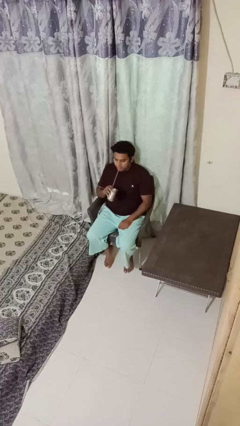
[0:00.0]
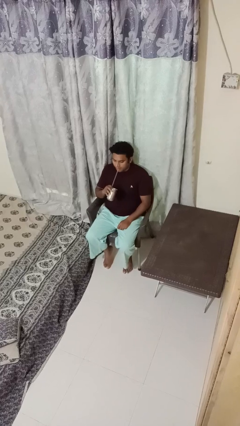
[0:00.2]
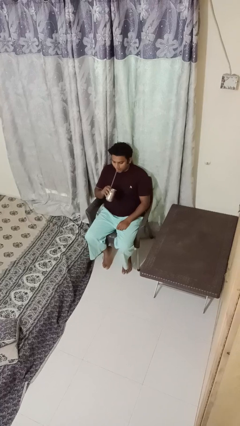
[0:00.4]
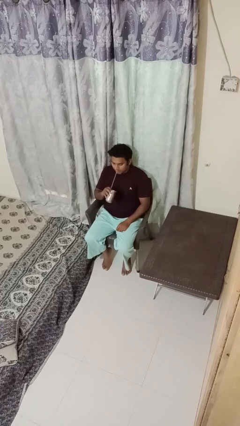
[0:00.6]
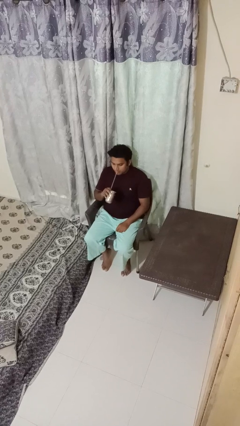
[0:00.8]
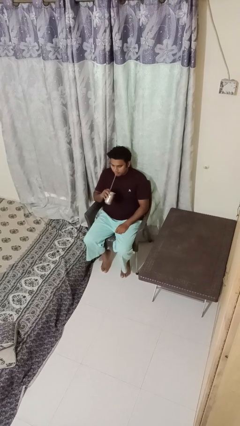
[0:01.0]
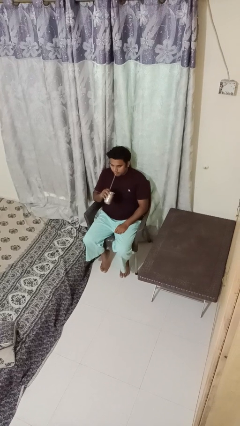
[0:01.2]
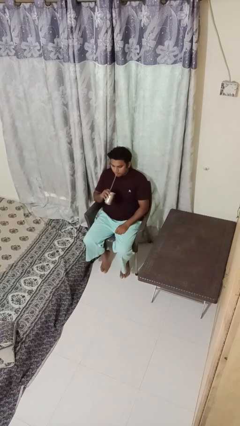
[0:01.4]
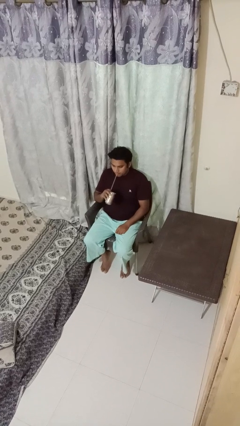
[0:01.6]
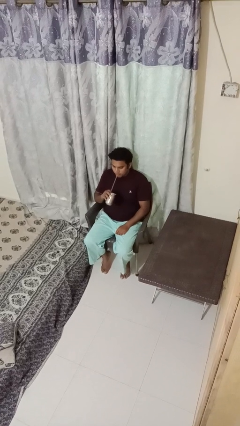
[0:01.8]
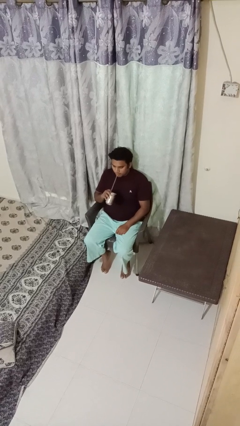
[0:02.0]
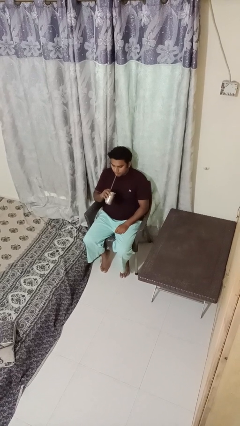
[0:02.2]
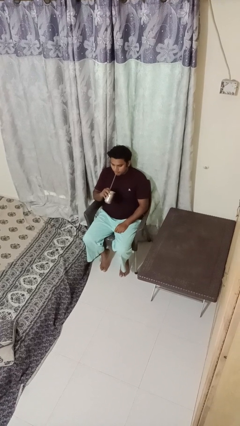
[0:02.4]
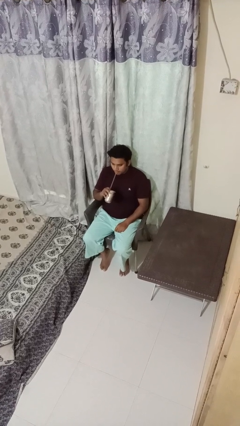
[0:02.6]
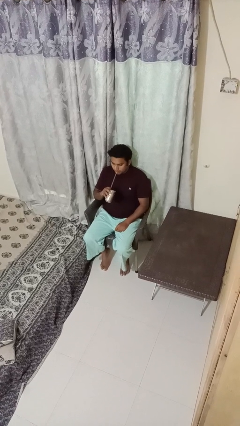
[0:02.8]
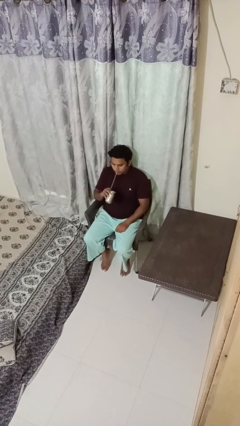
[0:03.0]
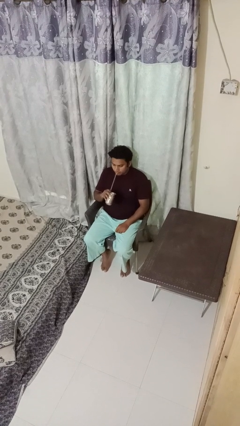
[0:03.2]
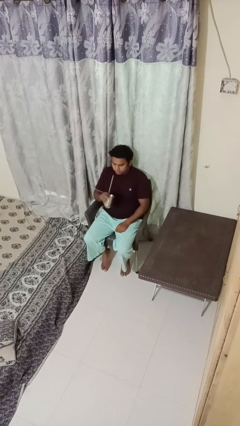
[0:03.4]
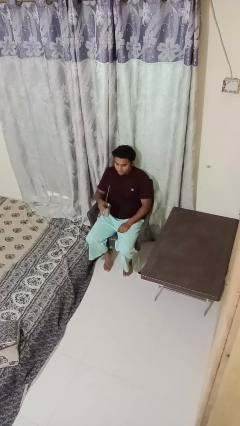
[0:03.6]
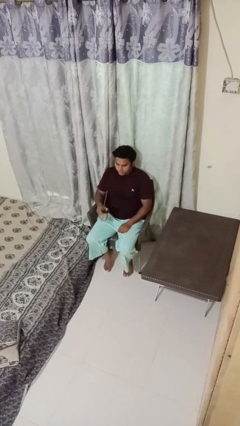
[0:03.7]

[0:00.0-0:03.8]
person drinks from straw

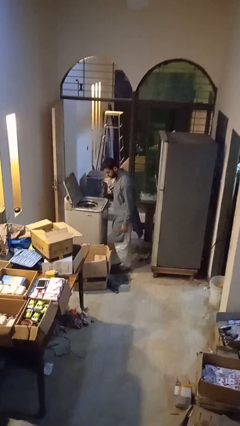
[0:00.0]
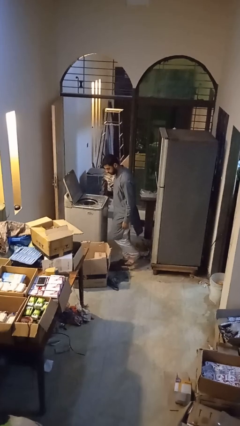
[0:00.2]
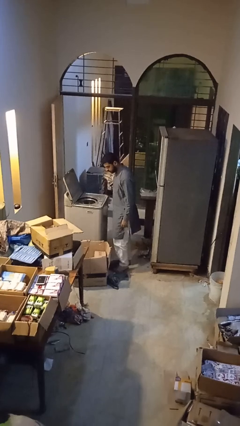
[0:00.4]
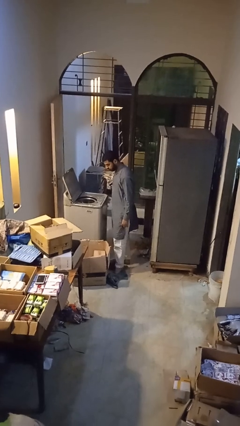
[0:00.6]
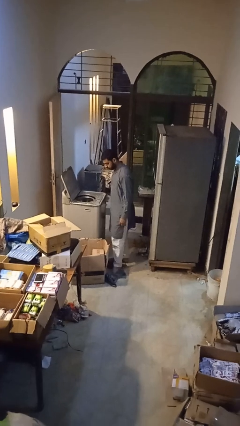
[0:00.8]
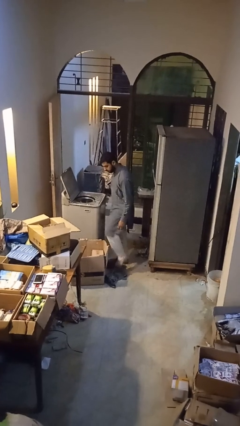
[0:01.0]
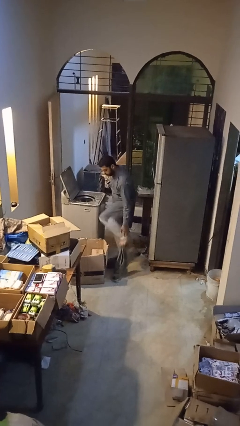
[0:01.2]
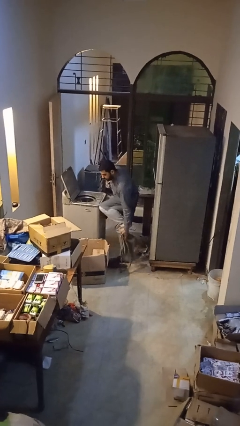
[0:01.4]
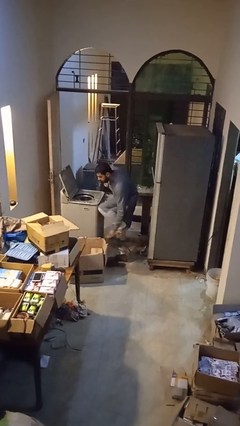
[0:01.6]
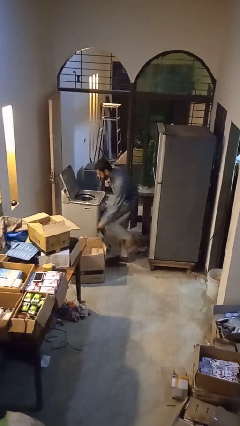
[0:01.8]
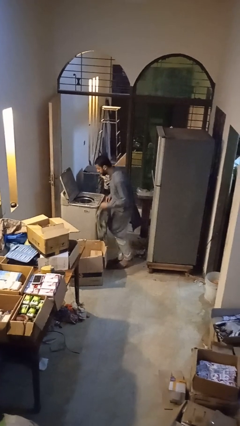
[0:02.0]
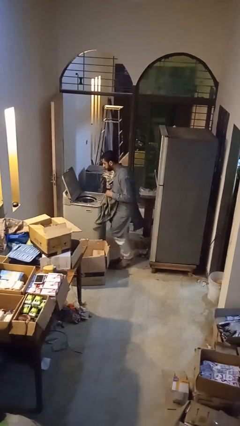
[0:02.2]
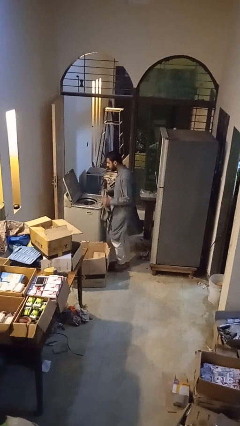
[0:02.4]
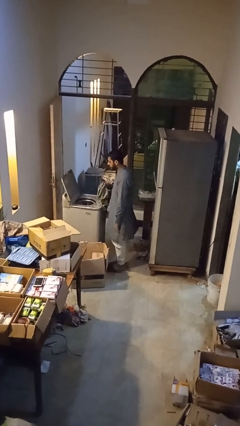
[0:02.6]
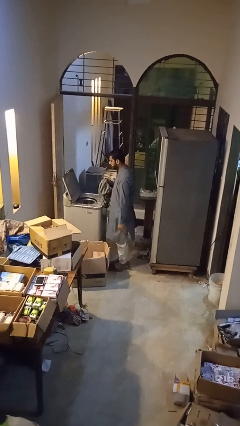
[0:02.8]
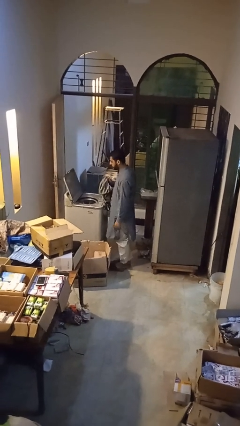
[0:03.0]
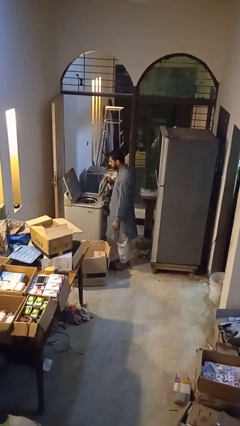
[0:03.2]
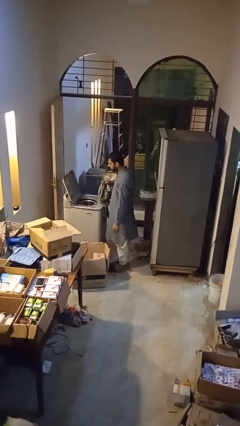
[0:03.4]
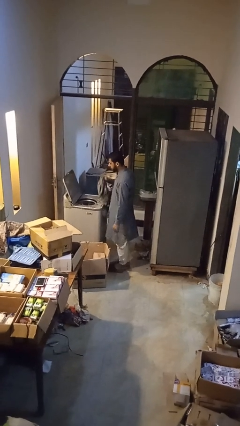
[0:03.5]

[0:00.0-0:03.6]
person unloads clotheswasher

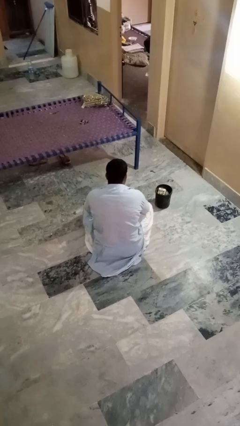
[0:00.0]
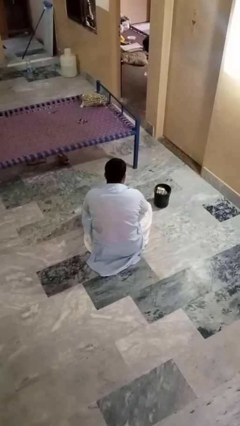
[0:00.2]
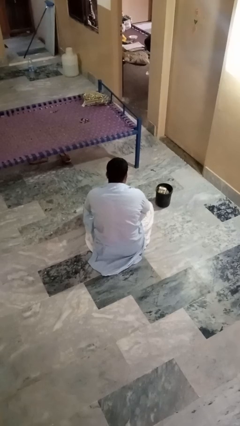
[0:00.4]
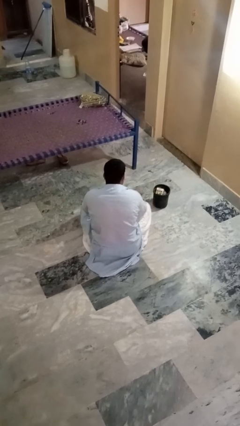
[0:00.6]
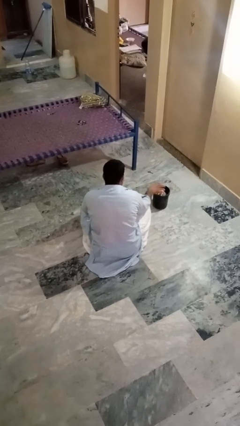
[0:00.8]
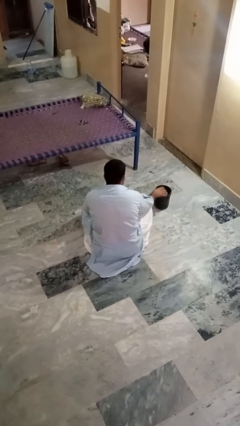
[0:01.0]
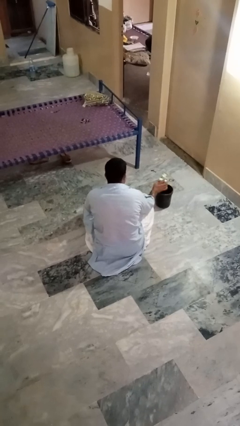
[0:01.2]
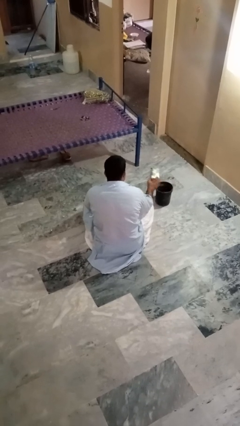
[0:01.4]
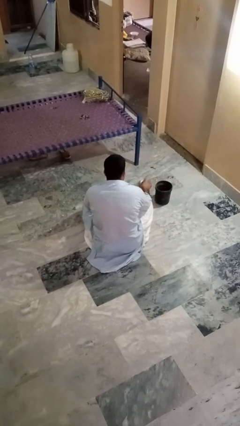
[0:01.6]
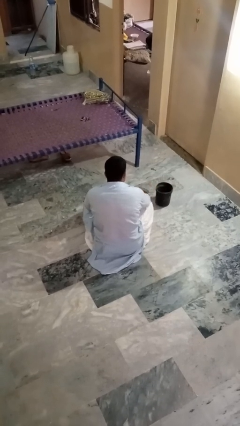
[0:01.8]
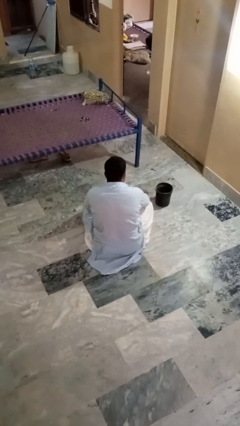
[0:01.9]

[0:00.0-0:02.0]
person takes object from basket

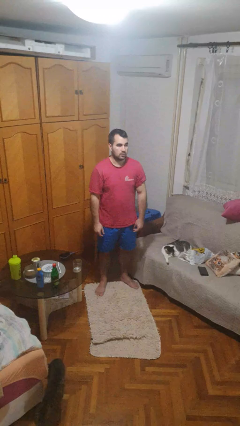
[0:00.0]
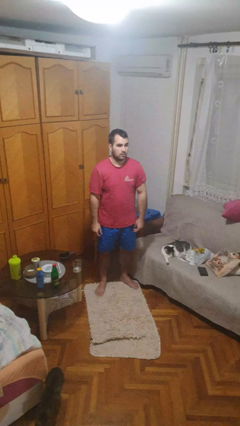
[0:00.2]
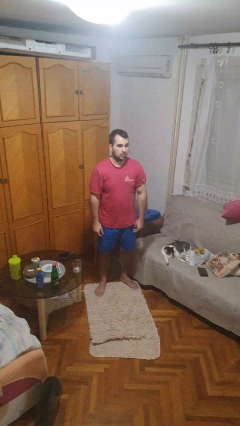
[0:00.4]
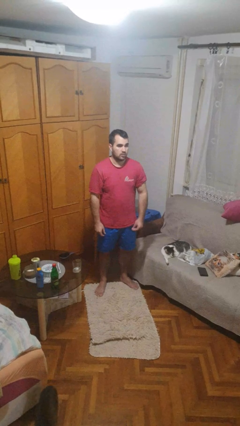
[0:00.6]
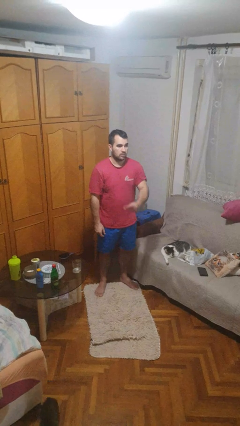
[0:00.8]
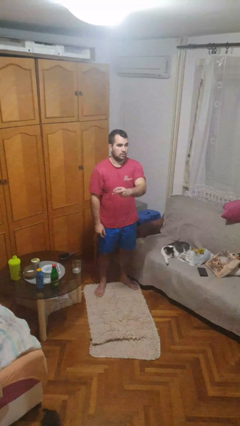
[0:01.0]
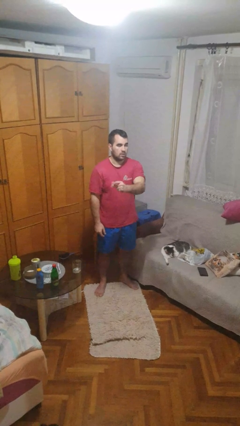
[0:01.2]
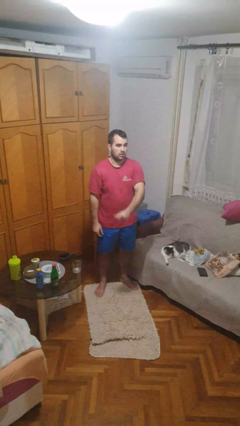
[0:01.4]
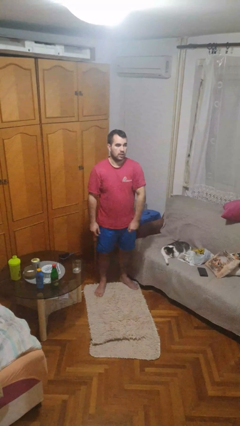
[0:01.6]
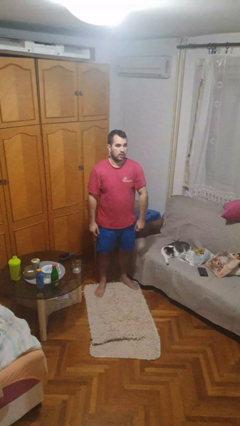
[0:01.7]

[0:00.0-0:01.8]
person snaps fingers

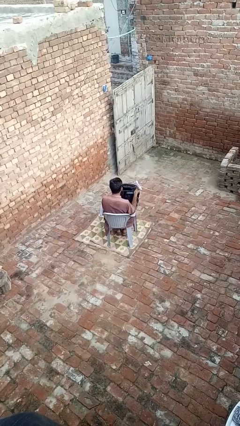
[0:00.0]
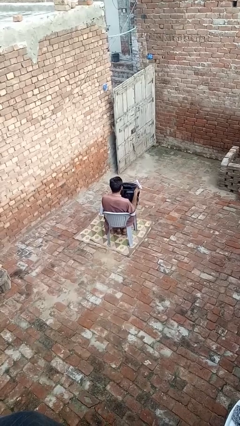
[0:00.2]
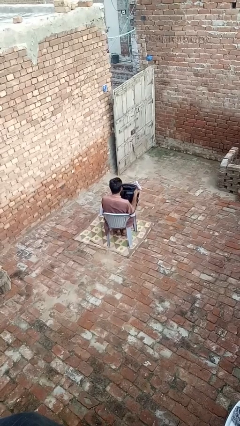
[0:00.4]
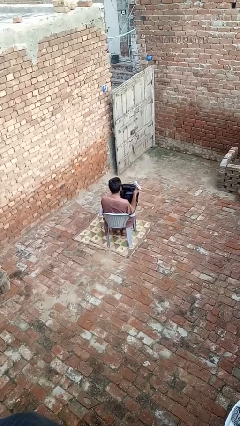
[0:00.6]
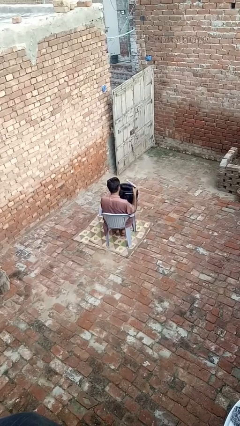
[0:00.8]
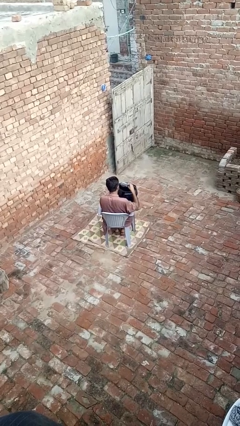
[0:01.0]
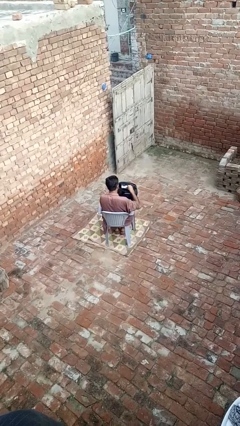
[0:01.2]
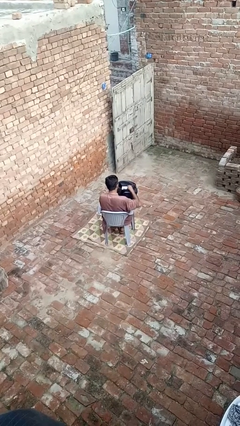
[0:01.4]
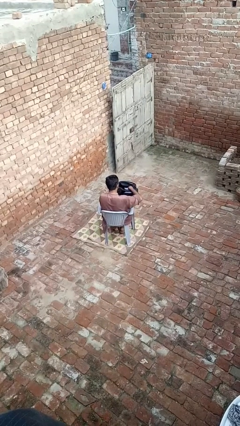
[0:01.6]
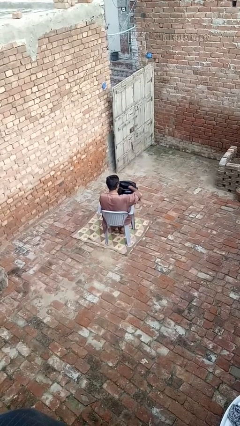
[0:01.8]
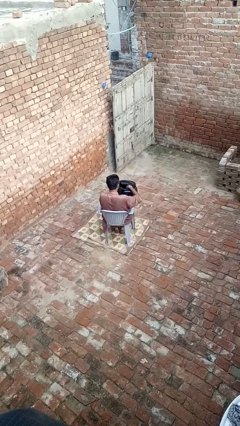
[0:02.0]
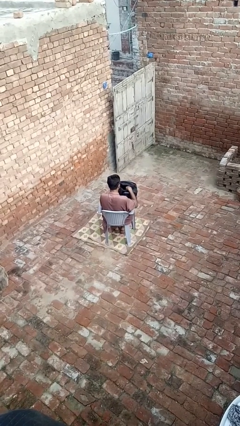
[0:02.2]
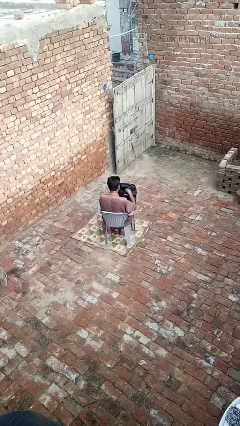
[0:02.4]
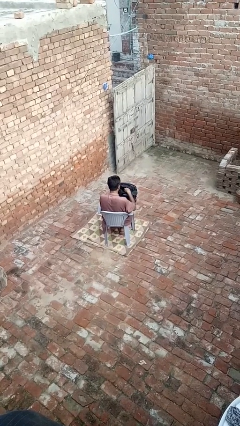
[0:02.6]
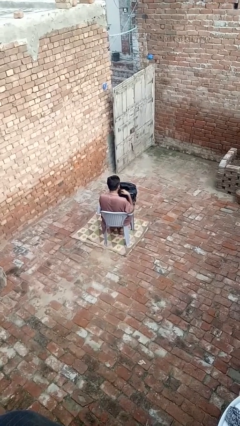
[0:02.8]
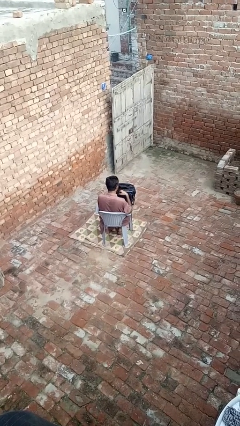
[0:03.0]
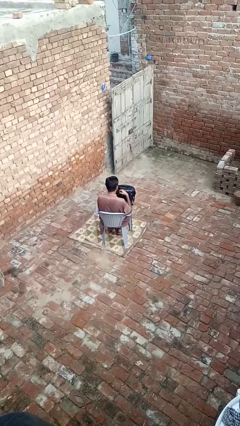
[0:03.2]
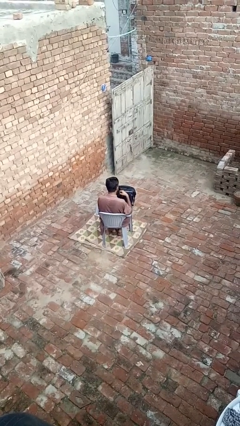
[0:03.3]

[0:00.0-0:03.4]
person puts object into backpack

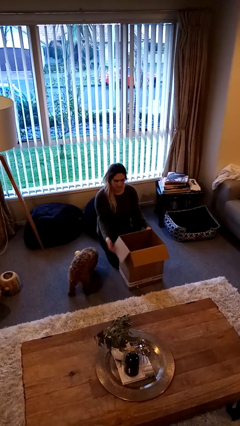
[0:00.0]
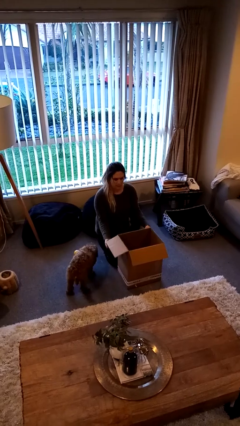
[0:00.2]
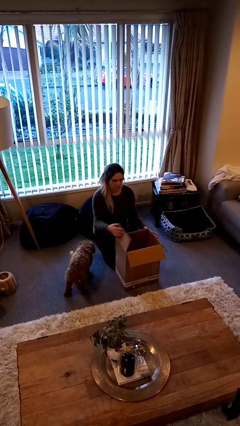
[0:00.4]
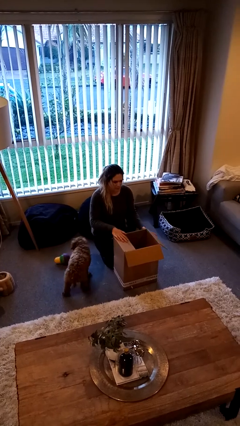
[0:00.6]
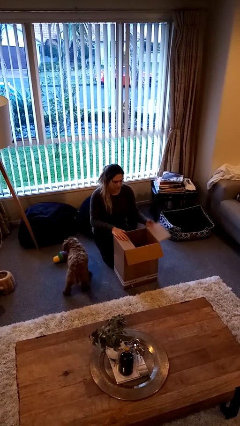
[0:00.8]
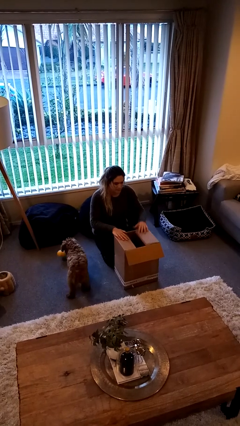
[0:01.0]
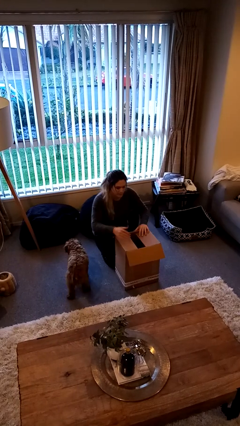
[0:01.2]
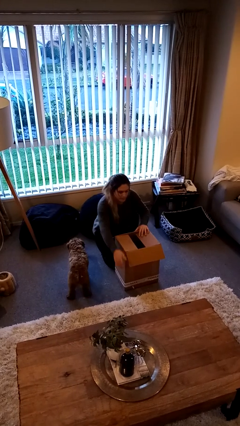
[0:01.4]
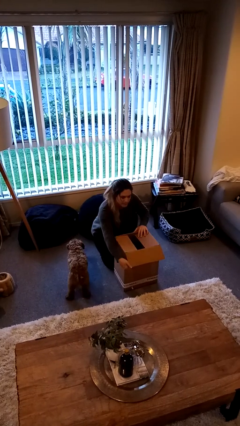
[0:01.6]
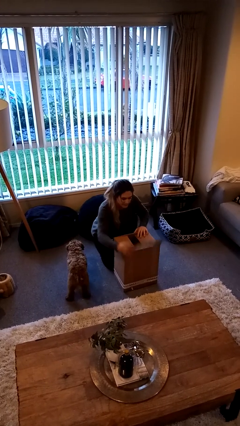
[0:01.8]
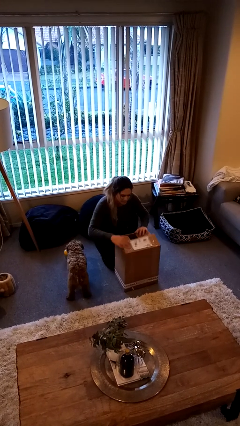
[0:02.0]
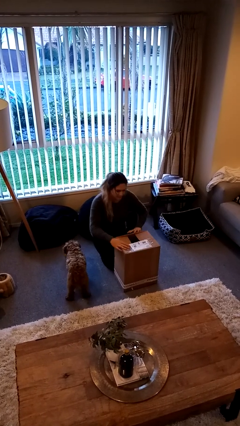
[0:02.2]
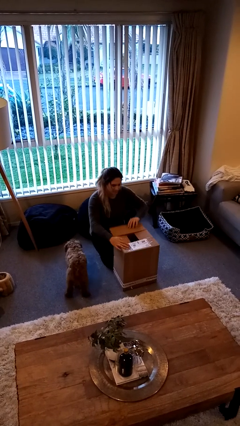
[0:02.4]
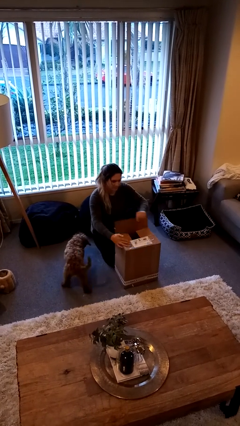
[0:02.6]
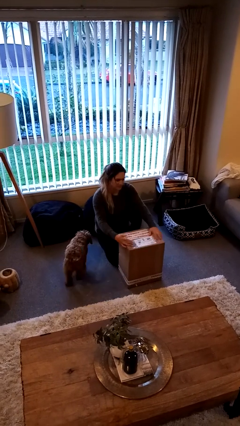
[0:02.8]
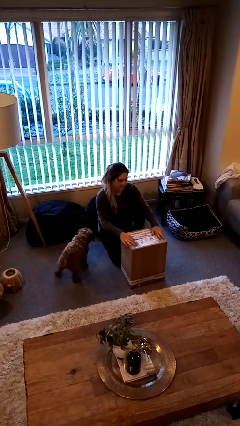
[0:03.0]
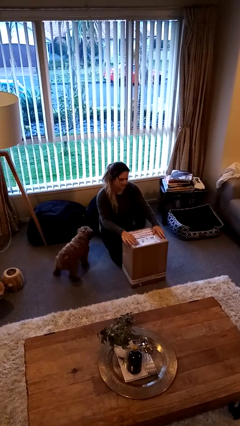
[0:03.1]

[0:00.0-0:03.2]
person closes box
